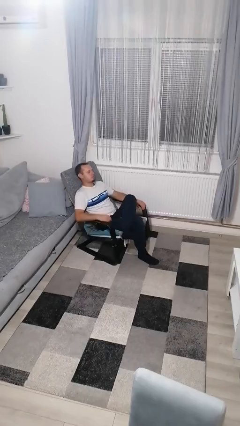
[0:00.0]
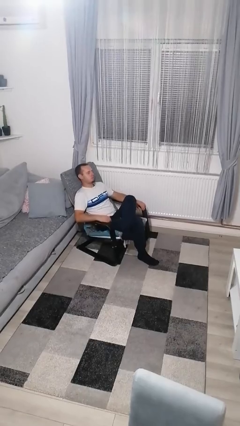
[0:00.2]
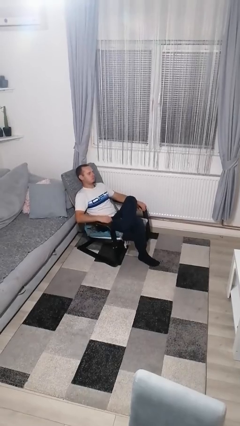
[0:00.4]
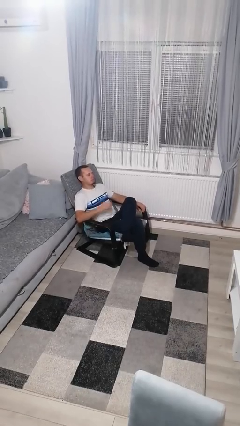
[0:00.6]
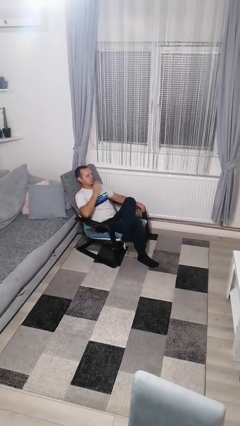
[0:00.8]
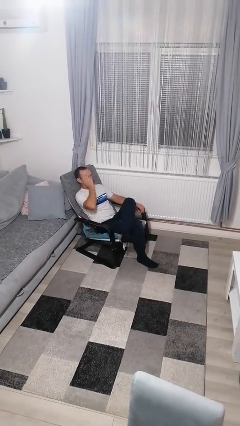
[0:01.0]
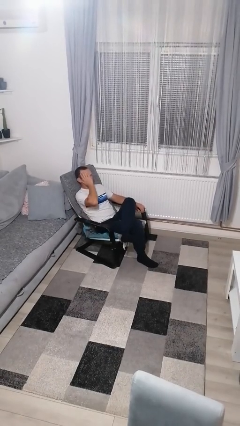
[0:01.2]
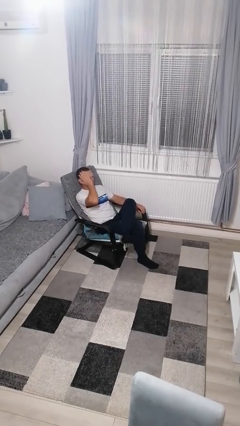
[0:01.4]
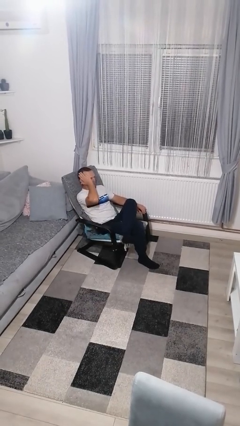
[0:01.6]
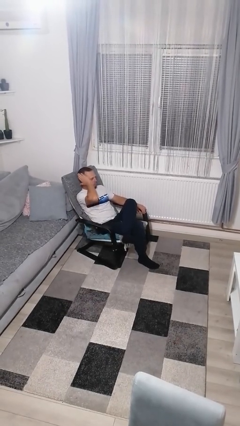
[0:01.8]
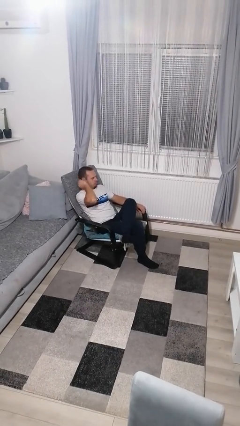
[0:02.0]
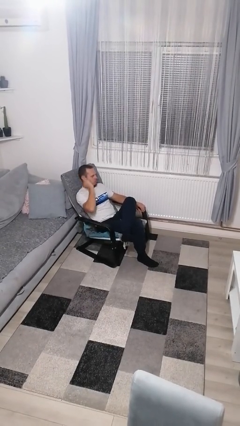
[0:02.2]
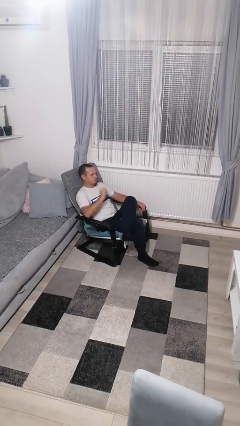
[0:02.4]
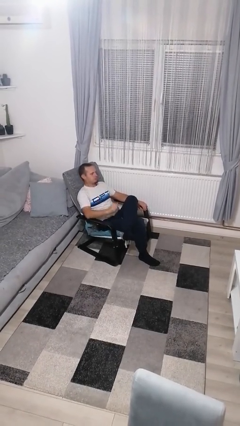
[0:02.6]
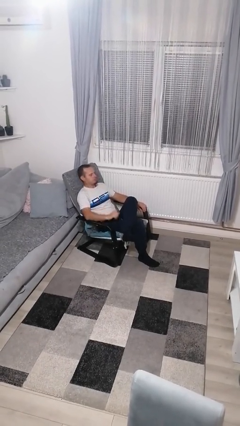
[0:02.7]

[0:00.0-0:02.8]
person strokes hair

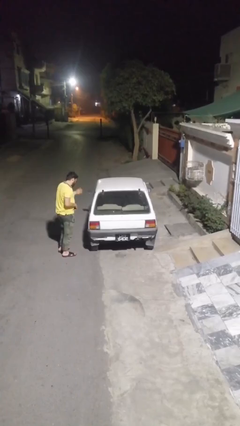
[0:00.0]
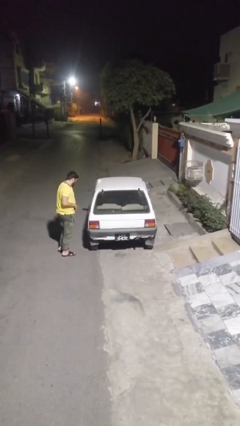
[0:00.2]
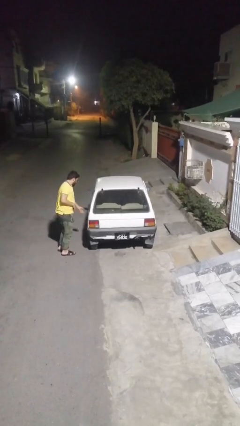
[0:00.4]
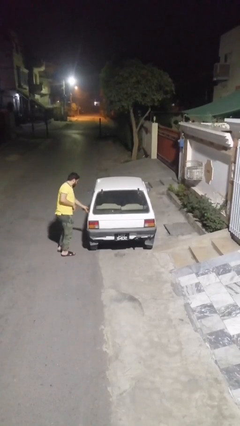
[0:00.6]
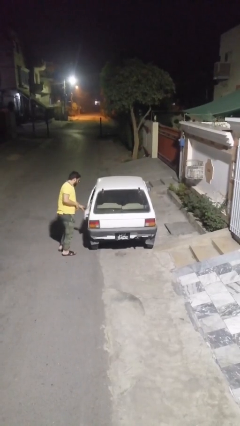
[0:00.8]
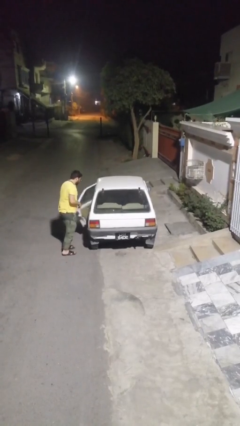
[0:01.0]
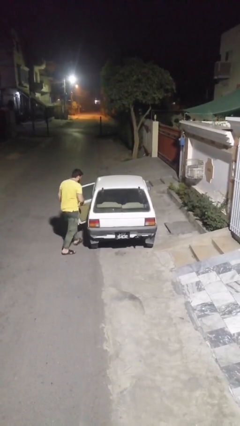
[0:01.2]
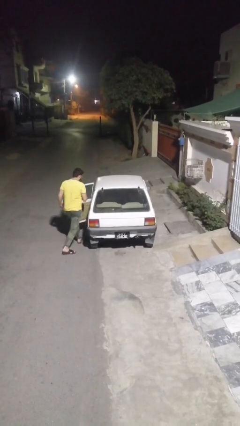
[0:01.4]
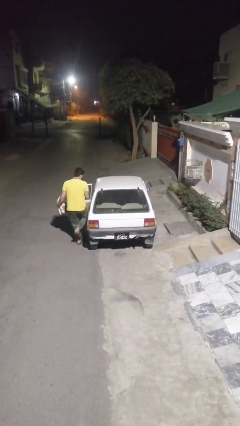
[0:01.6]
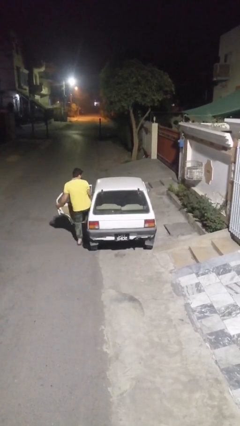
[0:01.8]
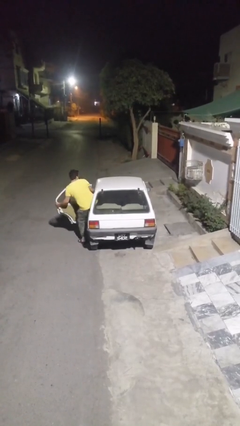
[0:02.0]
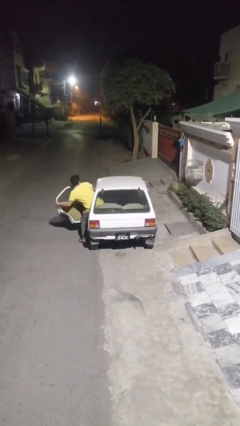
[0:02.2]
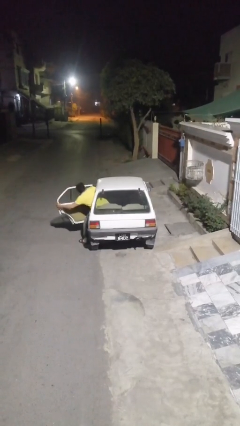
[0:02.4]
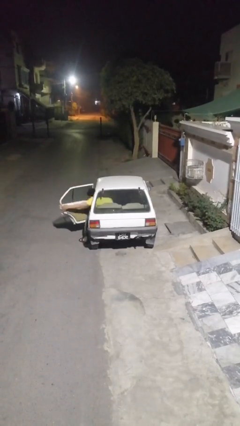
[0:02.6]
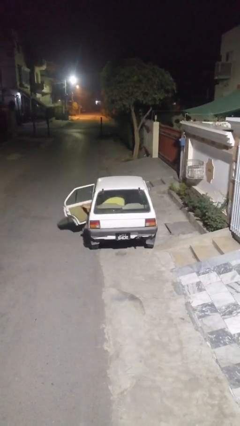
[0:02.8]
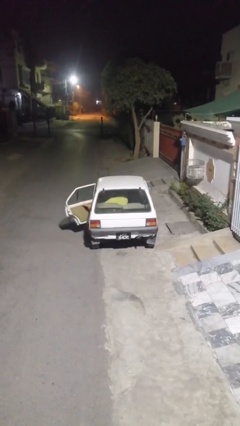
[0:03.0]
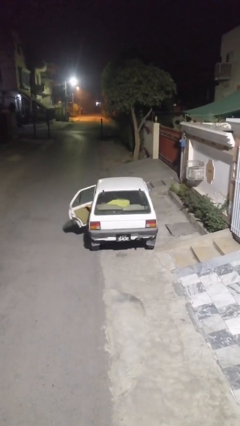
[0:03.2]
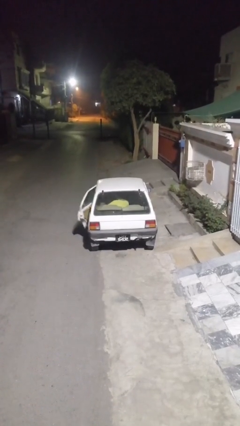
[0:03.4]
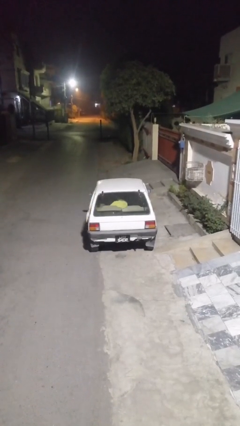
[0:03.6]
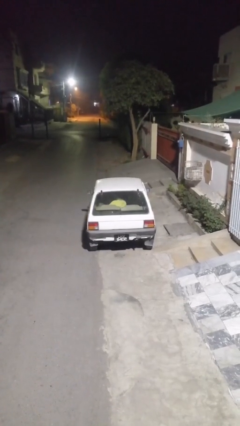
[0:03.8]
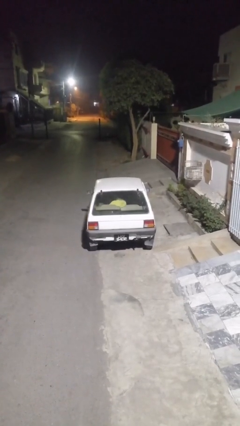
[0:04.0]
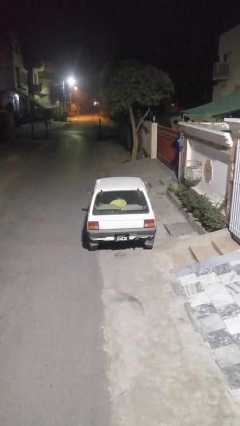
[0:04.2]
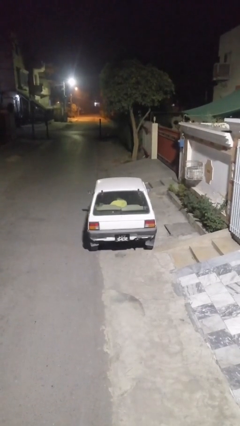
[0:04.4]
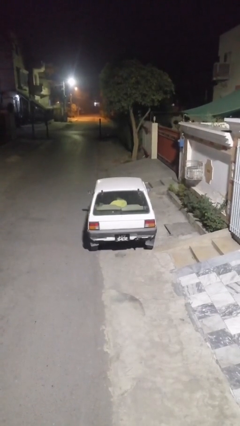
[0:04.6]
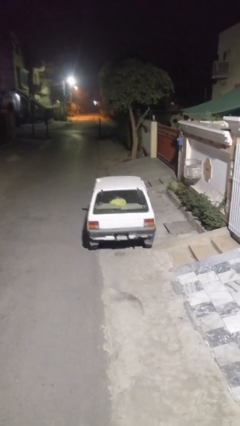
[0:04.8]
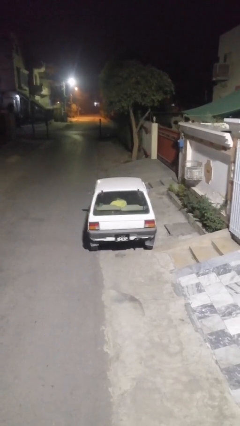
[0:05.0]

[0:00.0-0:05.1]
car picks up person

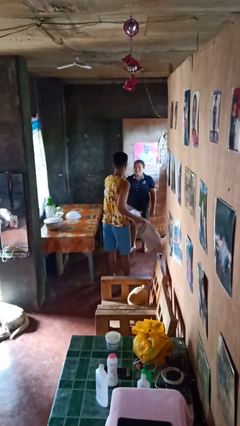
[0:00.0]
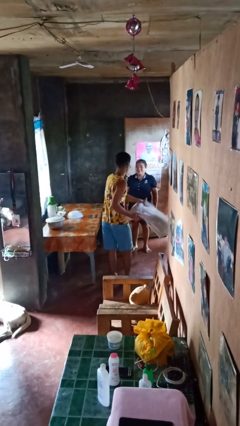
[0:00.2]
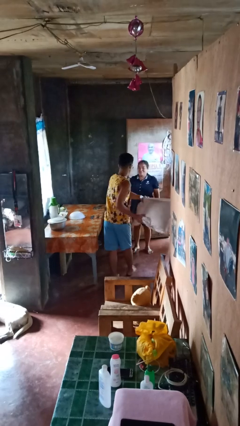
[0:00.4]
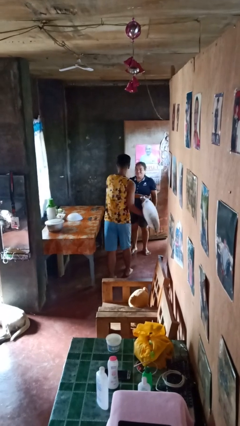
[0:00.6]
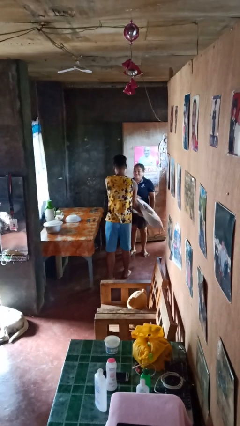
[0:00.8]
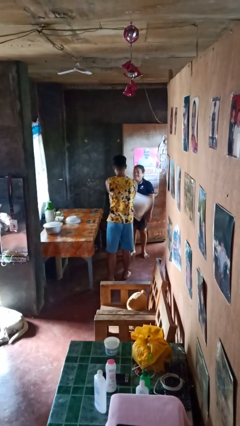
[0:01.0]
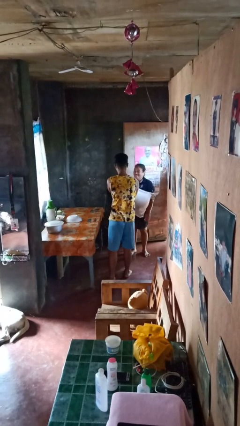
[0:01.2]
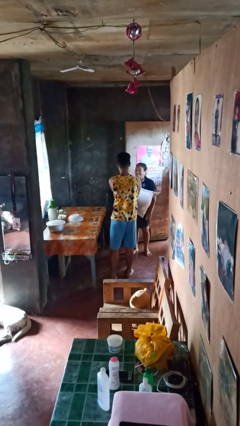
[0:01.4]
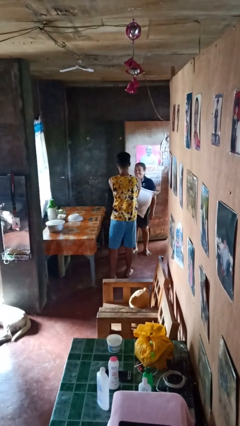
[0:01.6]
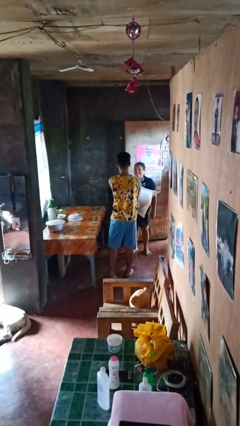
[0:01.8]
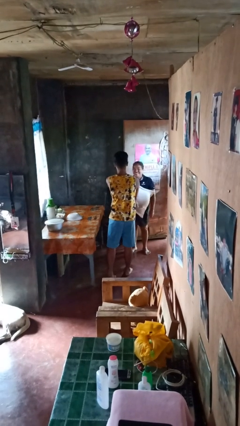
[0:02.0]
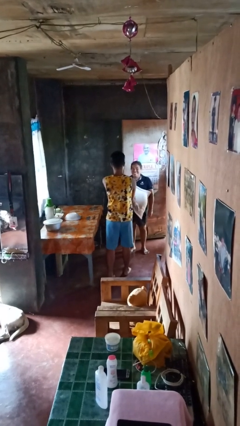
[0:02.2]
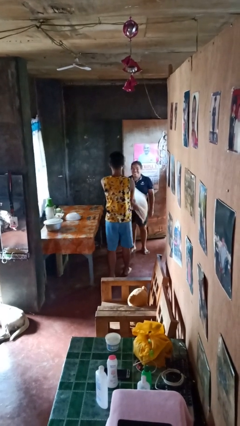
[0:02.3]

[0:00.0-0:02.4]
person hits person with pillow

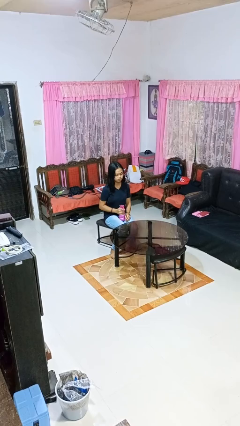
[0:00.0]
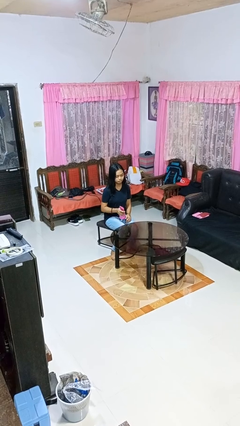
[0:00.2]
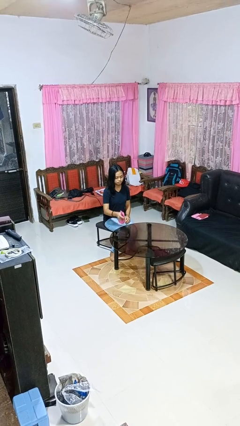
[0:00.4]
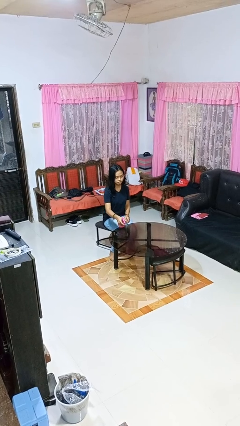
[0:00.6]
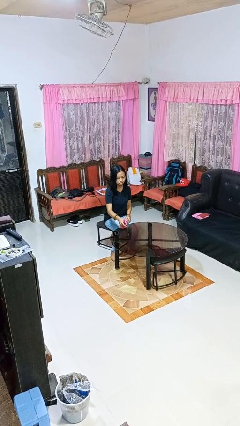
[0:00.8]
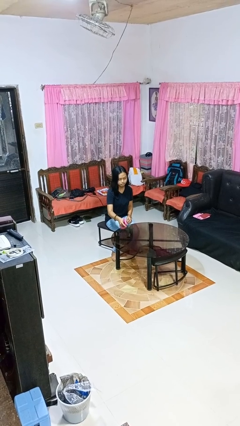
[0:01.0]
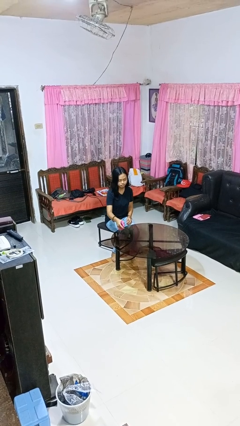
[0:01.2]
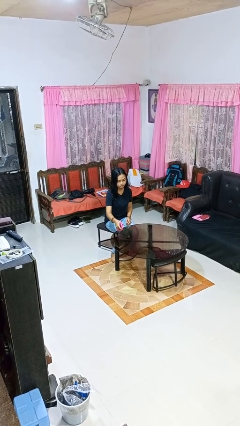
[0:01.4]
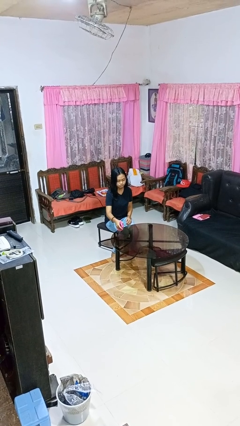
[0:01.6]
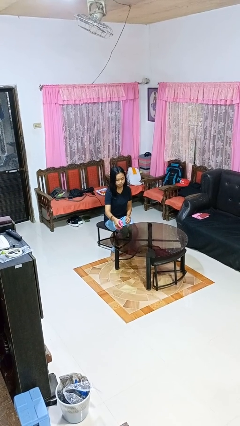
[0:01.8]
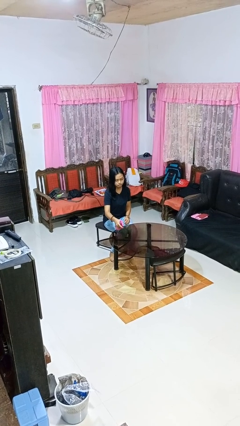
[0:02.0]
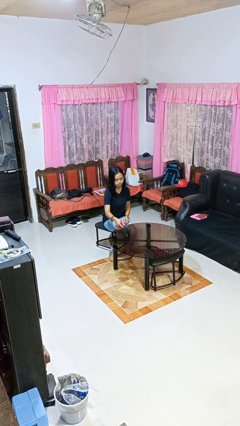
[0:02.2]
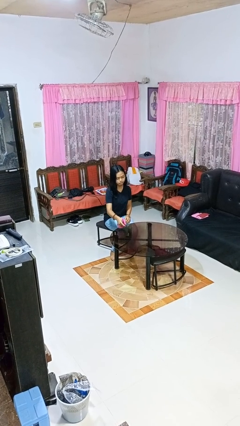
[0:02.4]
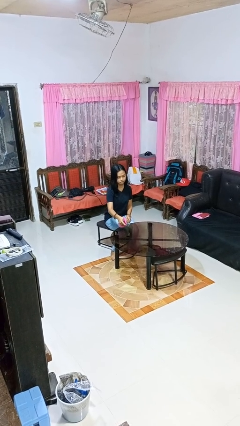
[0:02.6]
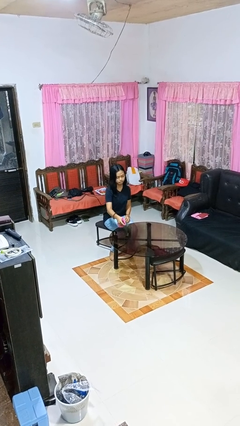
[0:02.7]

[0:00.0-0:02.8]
person sprays from bottle

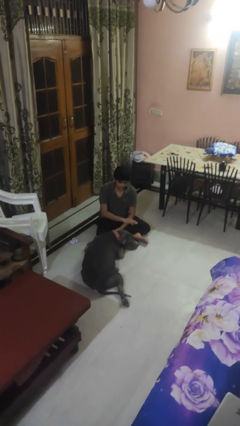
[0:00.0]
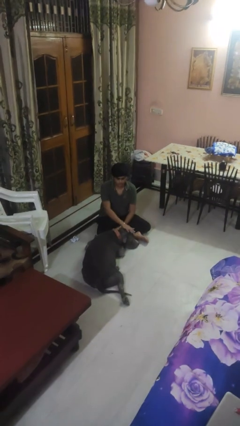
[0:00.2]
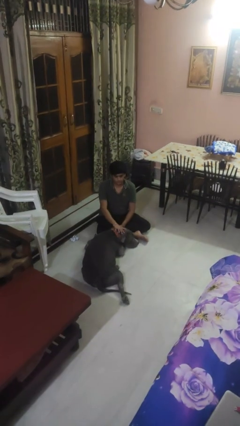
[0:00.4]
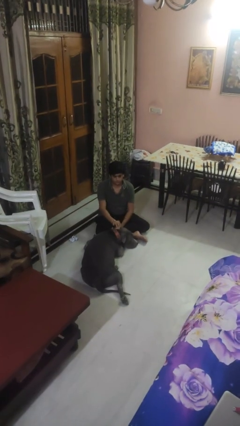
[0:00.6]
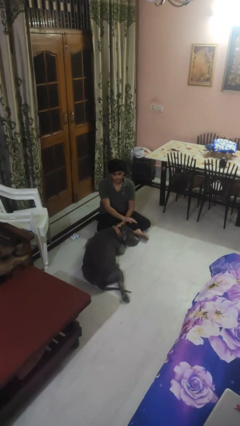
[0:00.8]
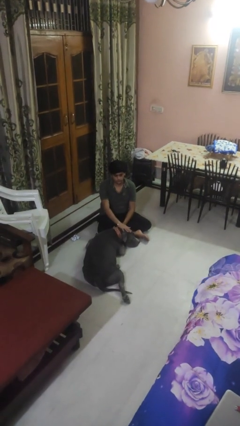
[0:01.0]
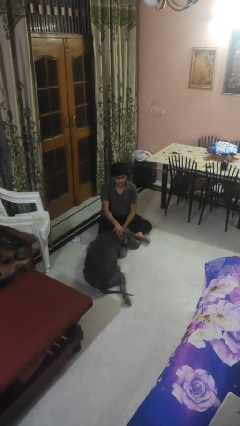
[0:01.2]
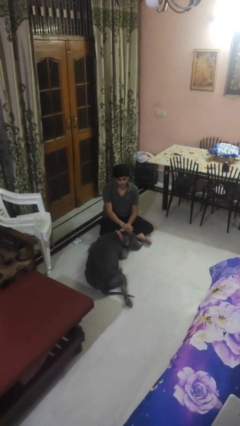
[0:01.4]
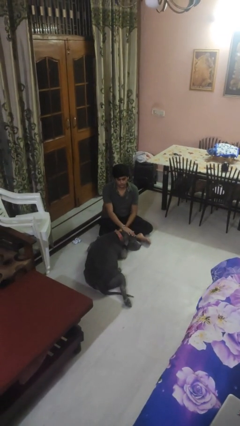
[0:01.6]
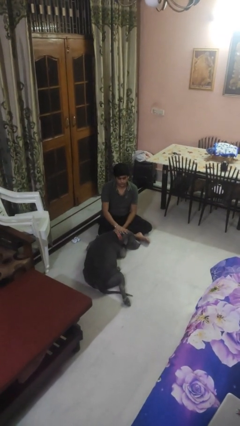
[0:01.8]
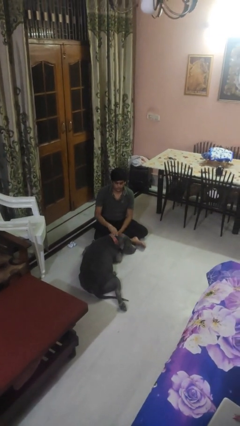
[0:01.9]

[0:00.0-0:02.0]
person pets dog

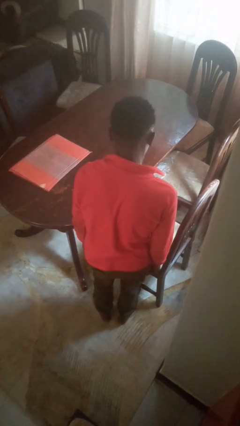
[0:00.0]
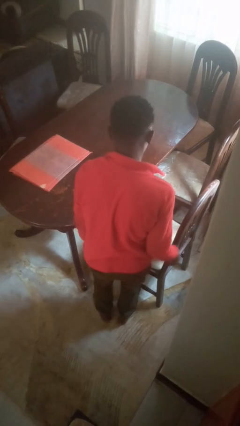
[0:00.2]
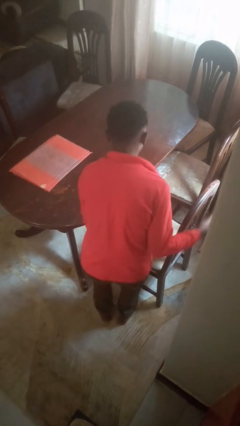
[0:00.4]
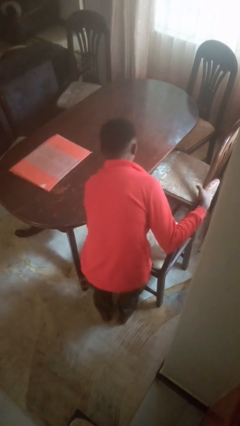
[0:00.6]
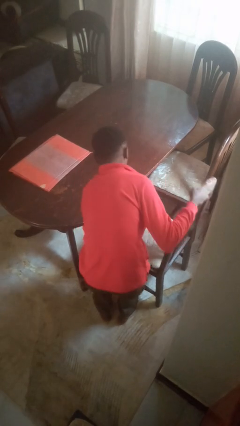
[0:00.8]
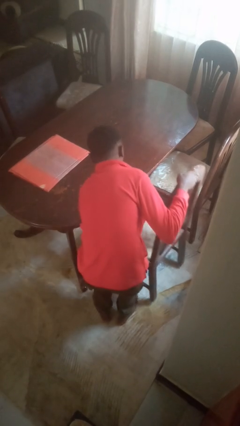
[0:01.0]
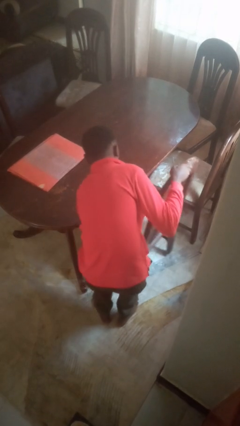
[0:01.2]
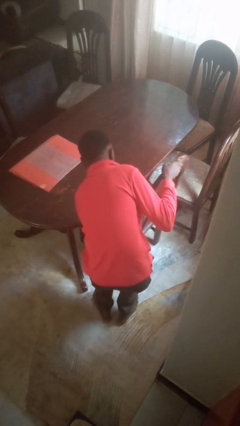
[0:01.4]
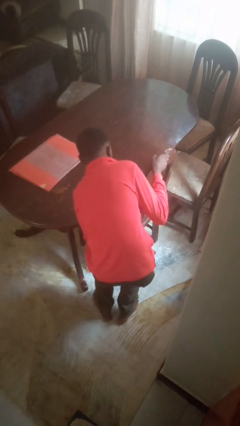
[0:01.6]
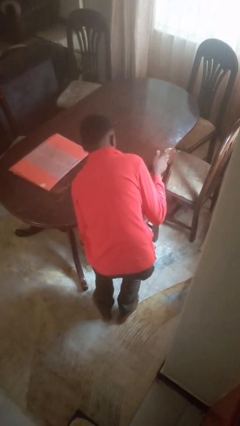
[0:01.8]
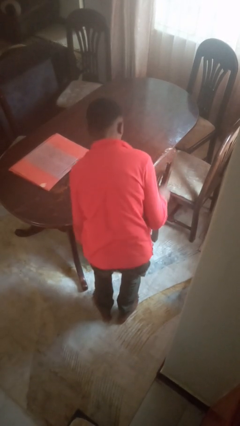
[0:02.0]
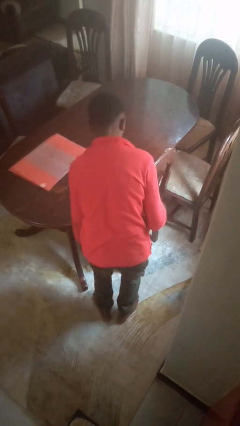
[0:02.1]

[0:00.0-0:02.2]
person pushes in chair
